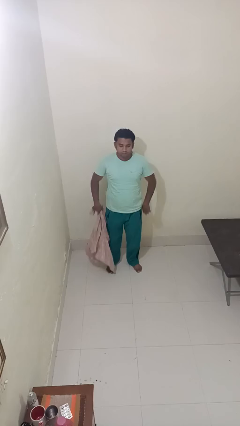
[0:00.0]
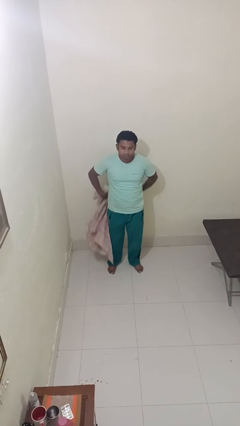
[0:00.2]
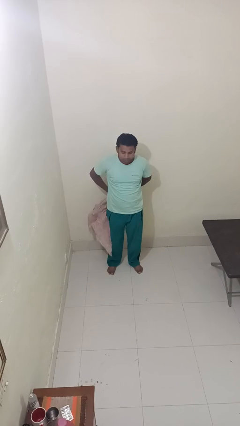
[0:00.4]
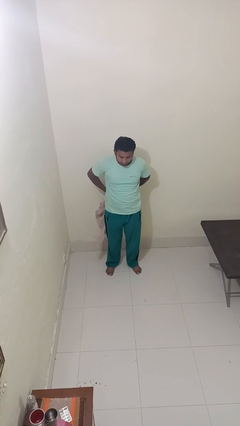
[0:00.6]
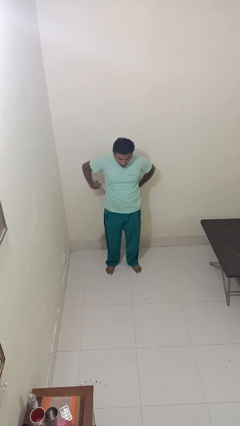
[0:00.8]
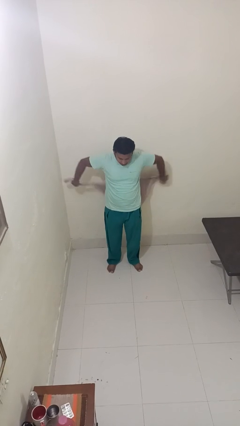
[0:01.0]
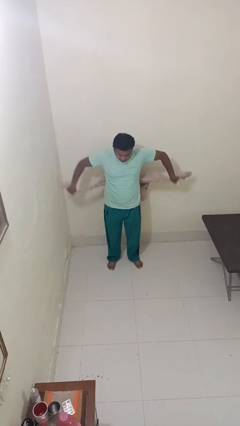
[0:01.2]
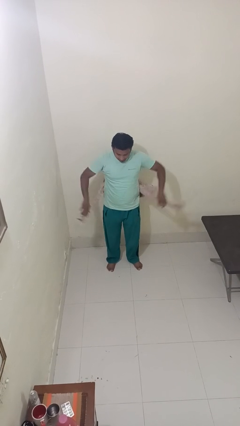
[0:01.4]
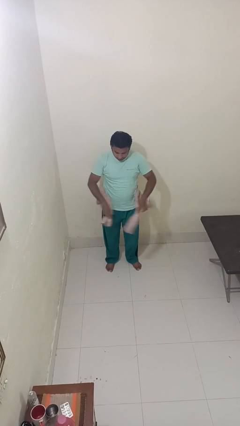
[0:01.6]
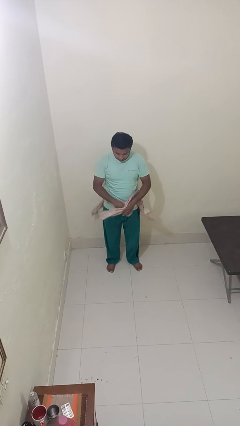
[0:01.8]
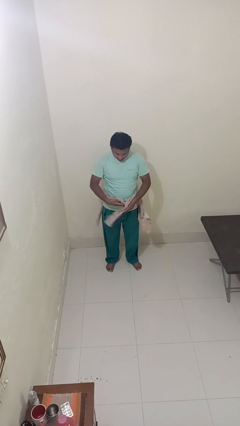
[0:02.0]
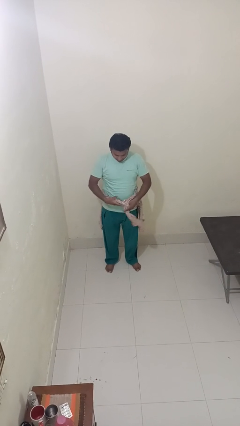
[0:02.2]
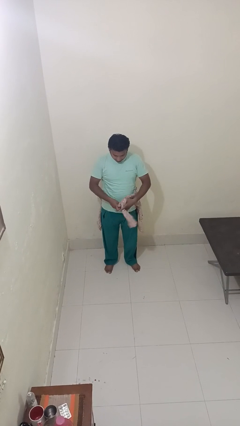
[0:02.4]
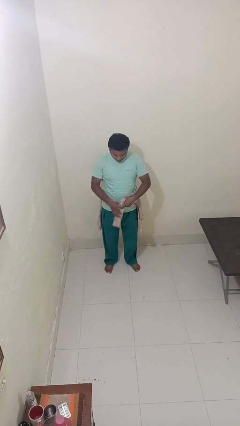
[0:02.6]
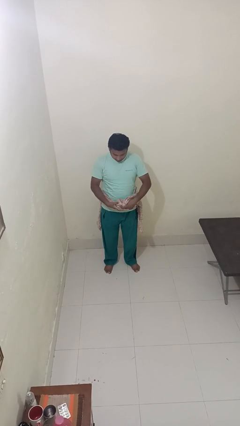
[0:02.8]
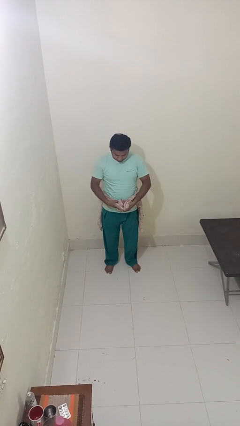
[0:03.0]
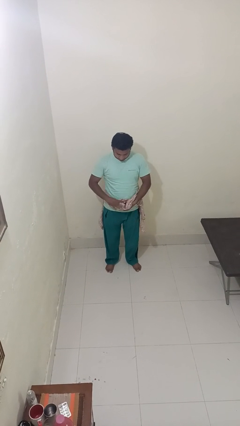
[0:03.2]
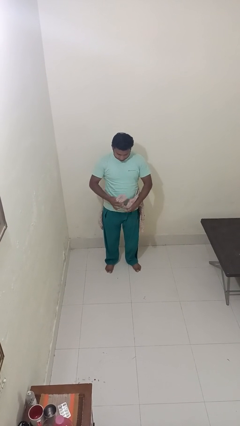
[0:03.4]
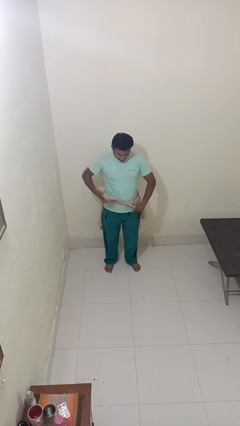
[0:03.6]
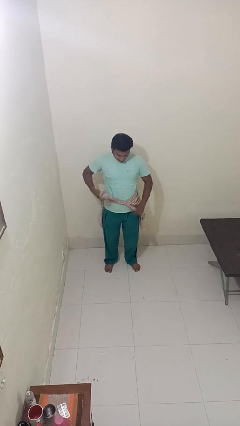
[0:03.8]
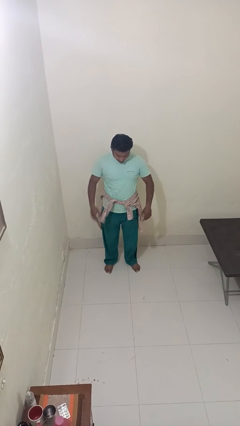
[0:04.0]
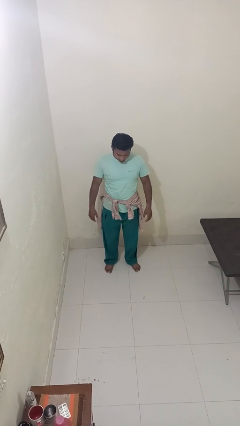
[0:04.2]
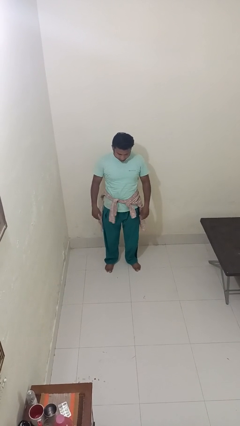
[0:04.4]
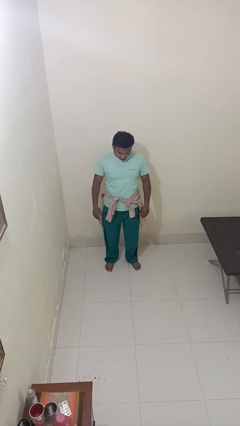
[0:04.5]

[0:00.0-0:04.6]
person ties jacket around waist

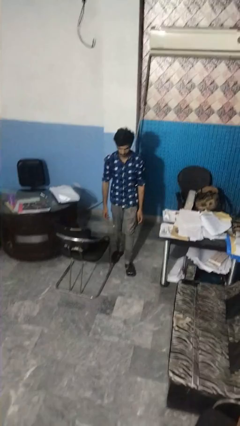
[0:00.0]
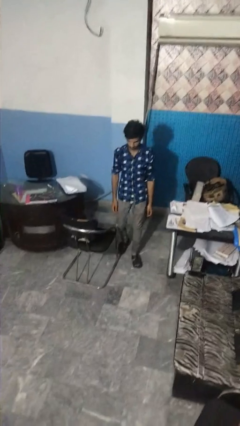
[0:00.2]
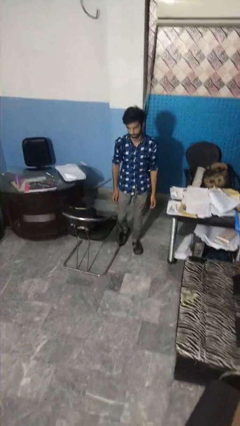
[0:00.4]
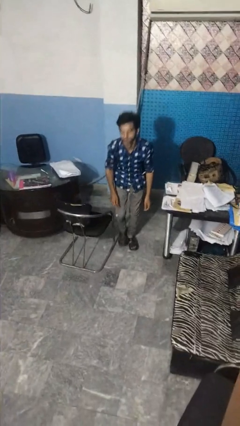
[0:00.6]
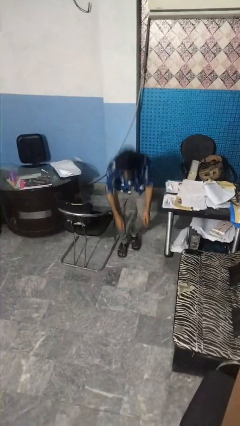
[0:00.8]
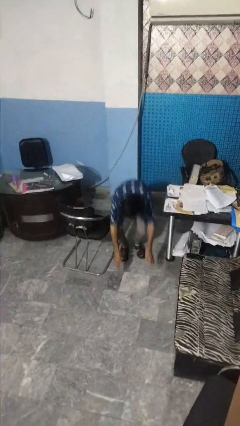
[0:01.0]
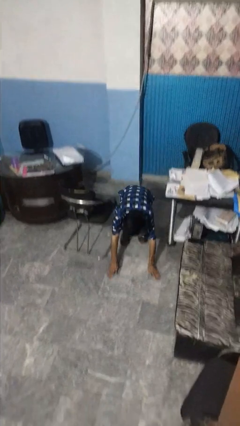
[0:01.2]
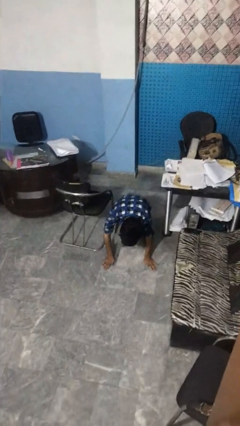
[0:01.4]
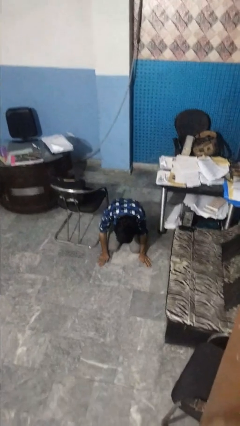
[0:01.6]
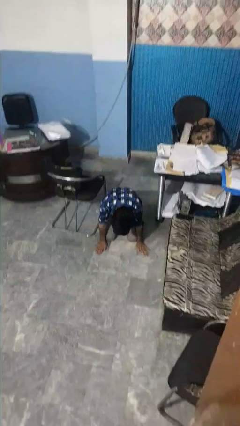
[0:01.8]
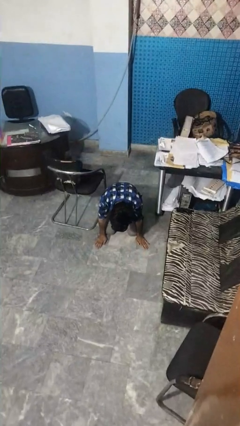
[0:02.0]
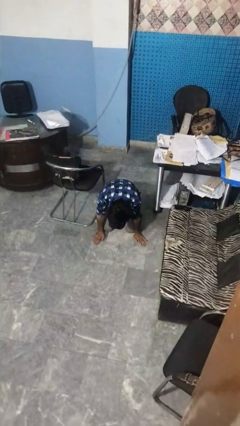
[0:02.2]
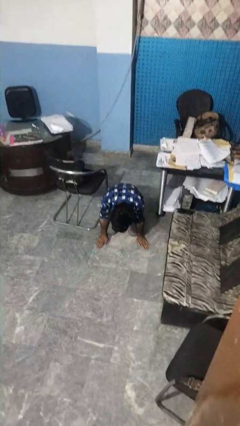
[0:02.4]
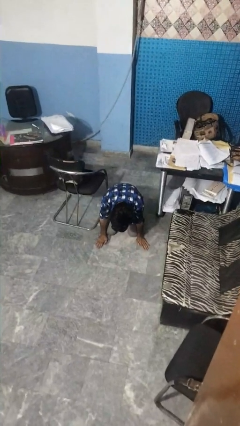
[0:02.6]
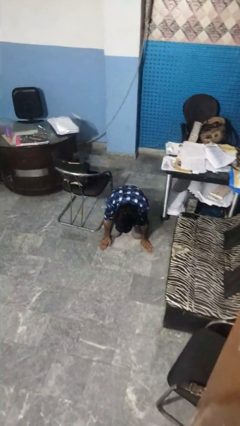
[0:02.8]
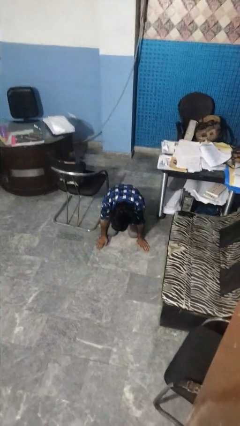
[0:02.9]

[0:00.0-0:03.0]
person trips on object on floor

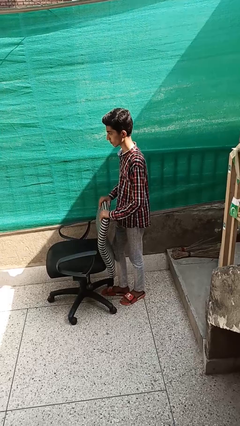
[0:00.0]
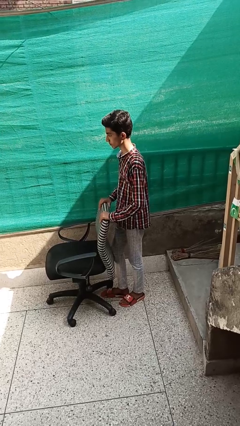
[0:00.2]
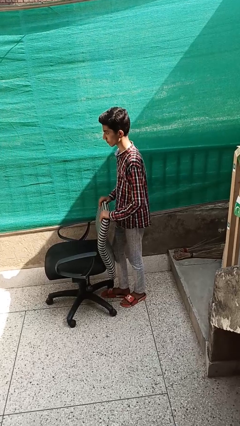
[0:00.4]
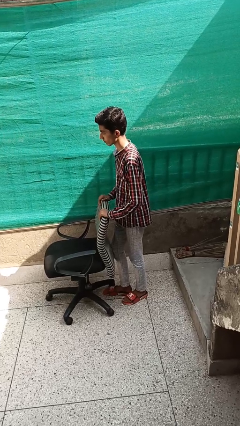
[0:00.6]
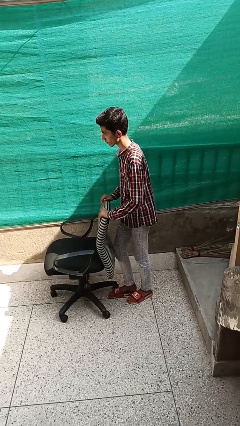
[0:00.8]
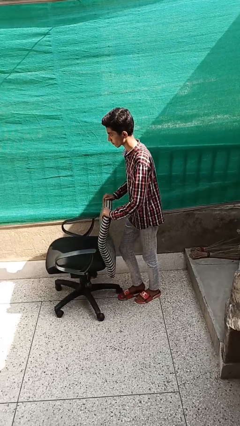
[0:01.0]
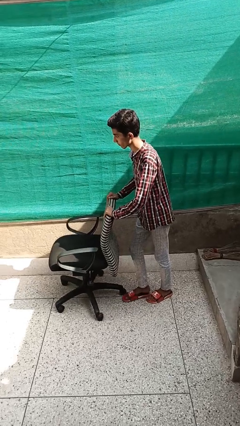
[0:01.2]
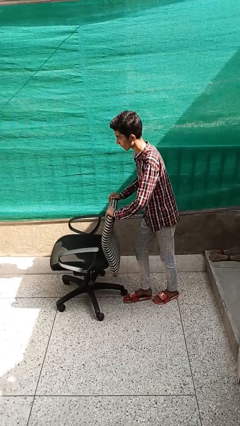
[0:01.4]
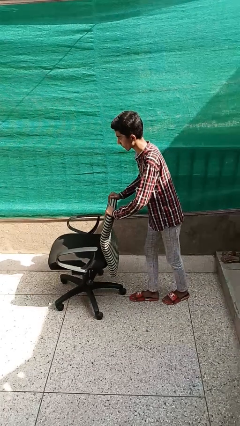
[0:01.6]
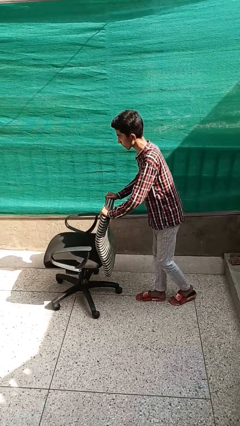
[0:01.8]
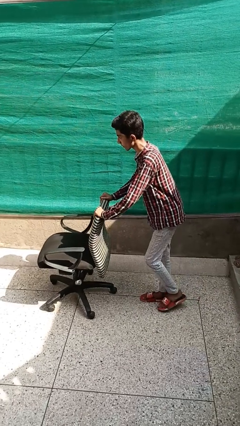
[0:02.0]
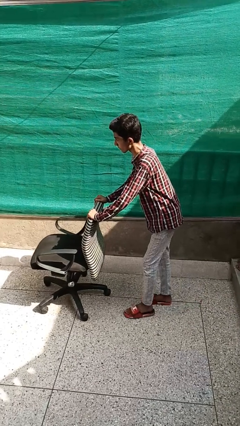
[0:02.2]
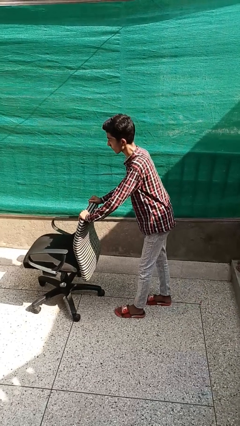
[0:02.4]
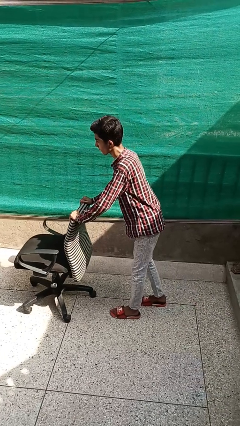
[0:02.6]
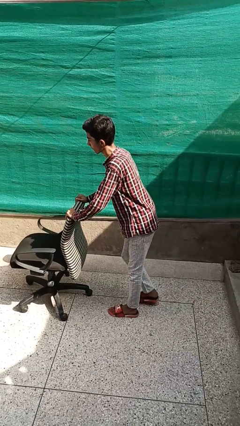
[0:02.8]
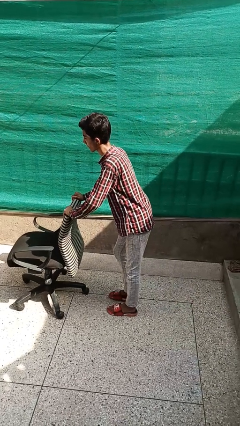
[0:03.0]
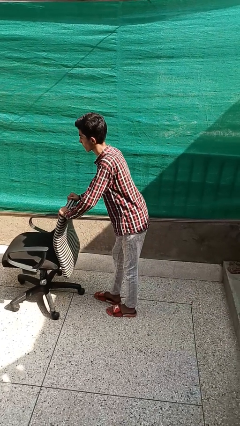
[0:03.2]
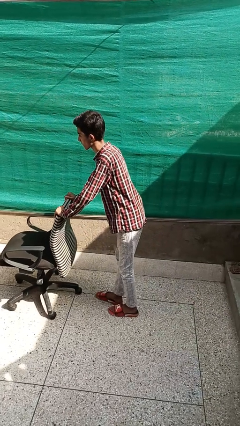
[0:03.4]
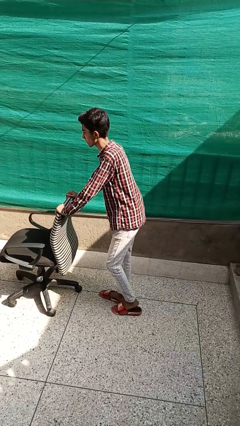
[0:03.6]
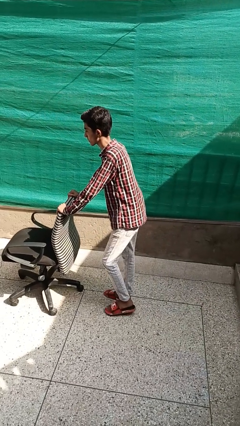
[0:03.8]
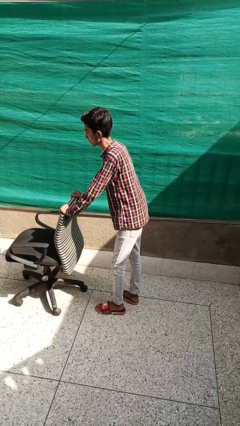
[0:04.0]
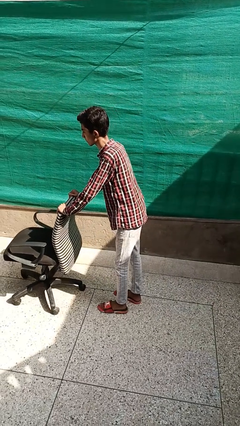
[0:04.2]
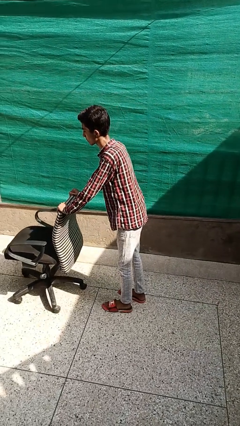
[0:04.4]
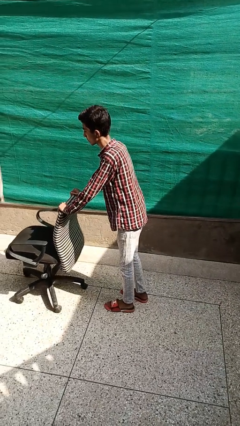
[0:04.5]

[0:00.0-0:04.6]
person pushes wheeled cart

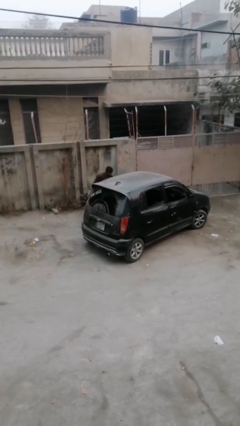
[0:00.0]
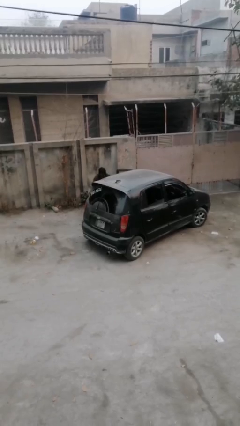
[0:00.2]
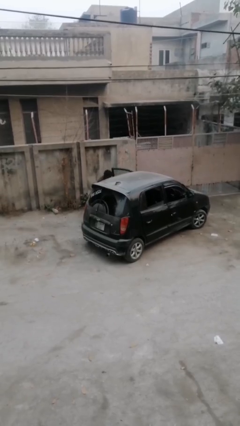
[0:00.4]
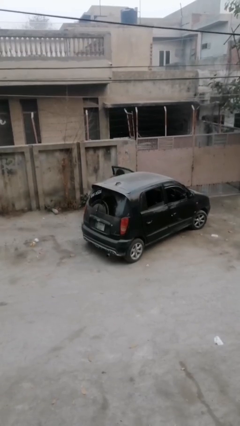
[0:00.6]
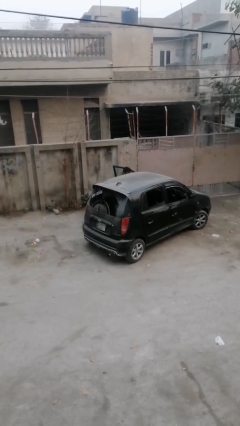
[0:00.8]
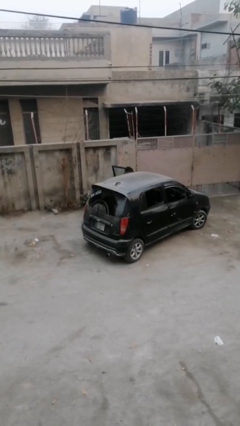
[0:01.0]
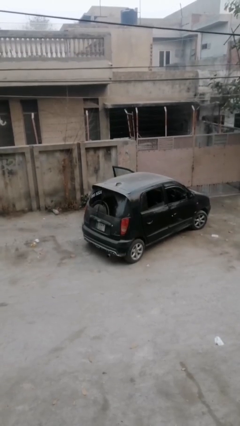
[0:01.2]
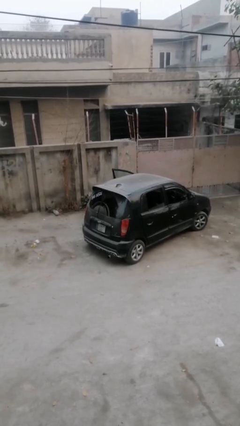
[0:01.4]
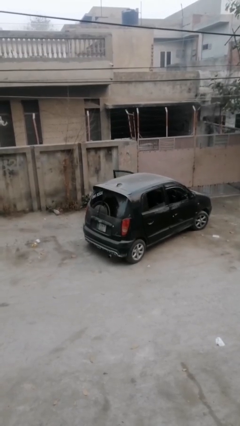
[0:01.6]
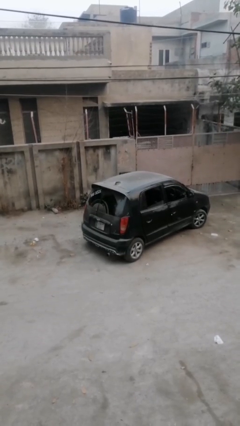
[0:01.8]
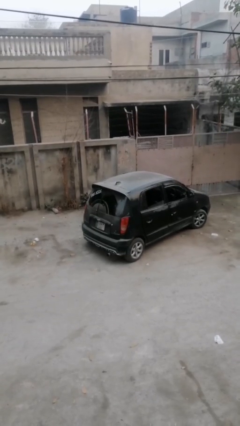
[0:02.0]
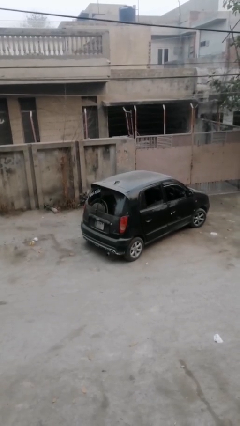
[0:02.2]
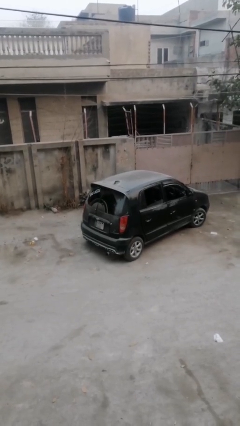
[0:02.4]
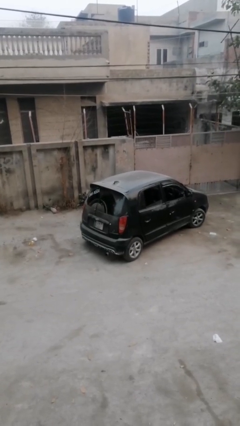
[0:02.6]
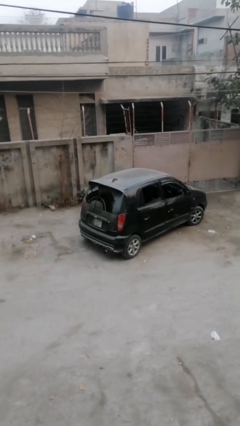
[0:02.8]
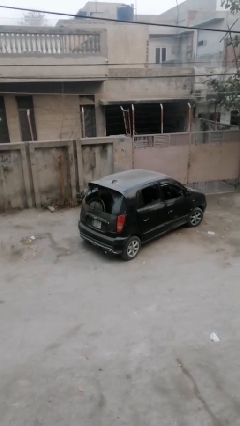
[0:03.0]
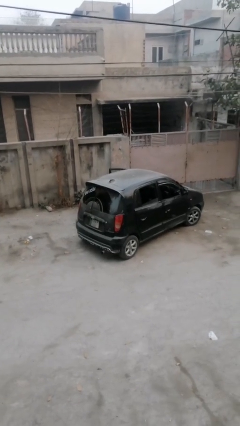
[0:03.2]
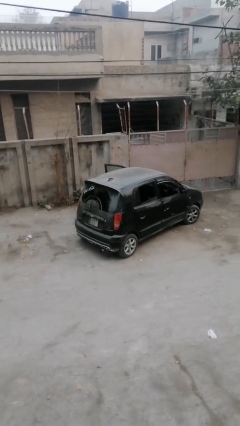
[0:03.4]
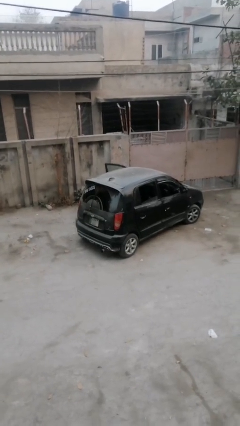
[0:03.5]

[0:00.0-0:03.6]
car picks up person

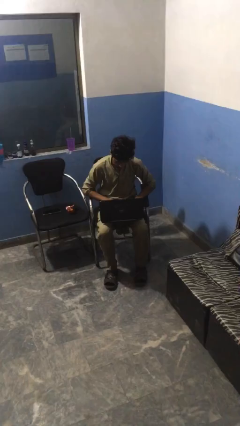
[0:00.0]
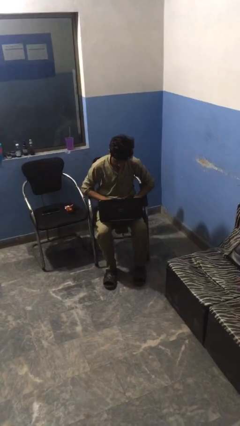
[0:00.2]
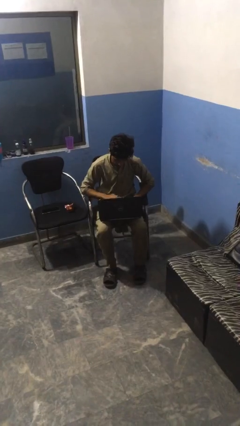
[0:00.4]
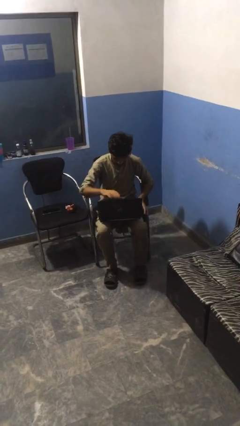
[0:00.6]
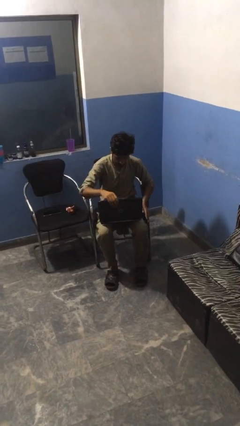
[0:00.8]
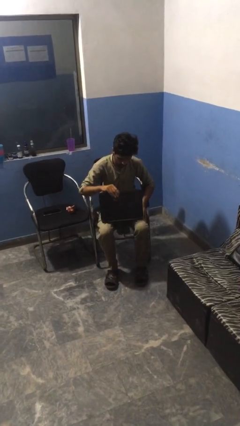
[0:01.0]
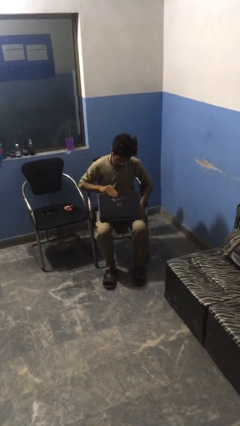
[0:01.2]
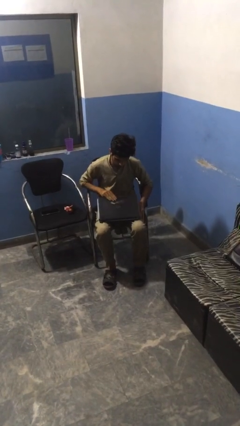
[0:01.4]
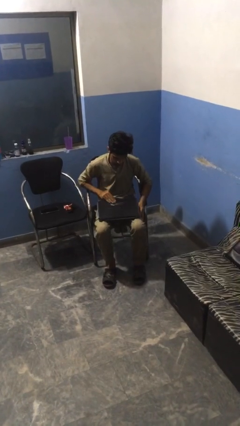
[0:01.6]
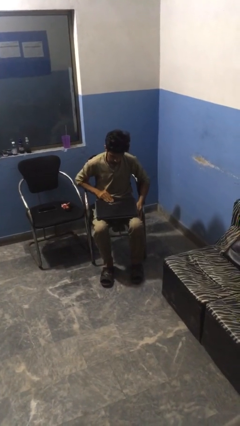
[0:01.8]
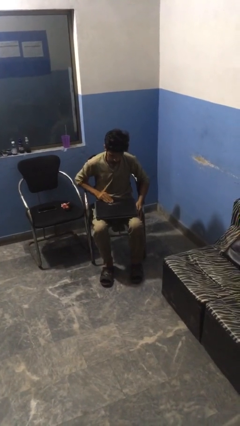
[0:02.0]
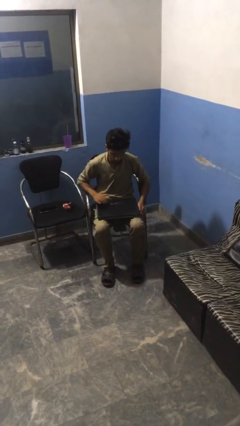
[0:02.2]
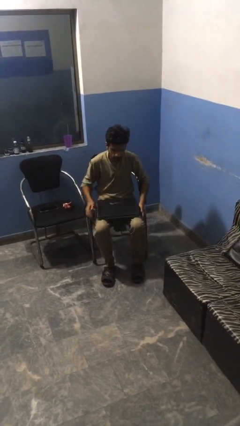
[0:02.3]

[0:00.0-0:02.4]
person closes laptop
